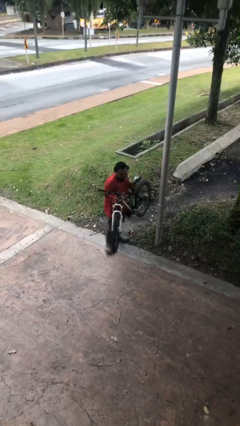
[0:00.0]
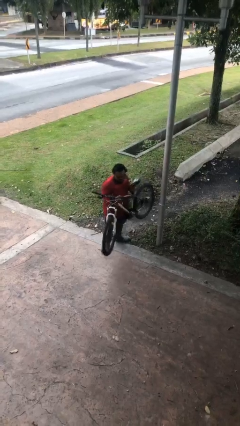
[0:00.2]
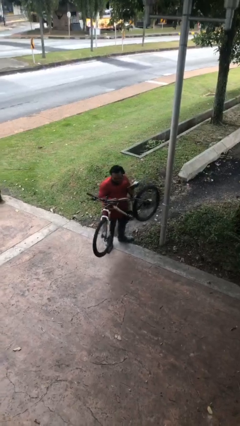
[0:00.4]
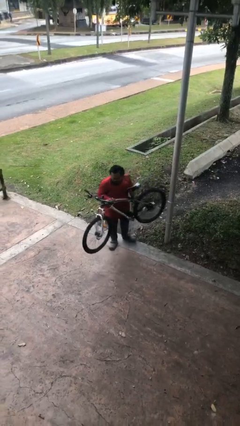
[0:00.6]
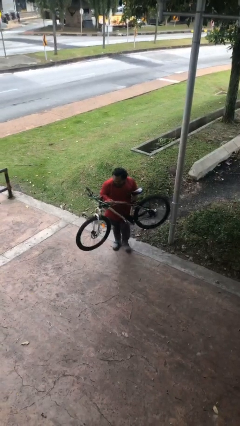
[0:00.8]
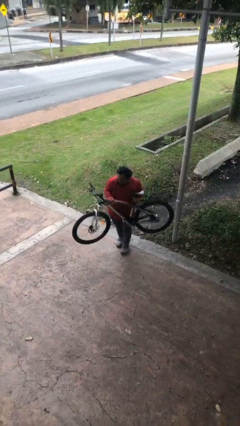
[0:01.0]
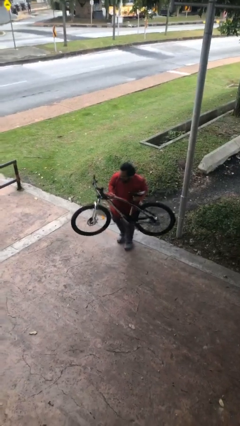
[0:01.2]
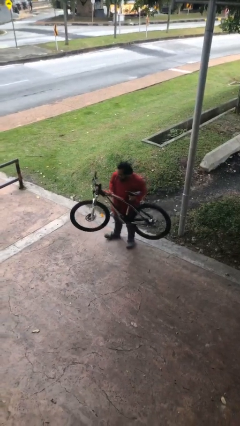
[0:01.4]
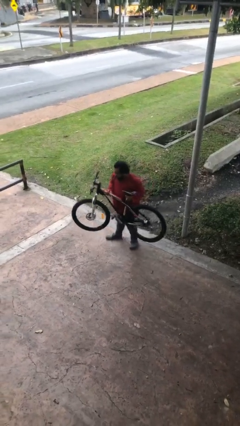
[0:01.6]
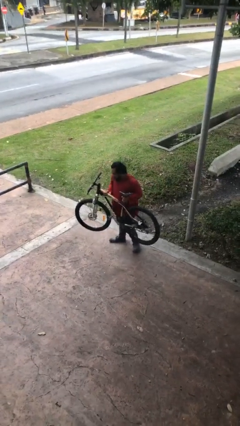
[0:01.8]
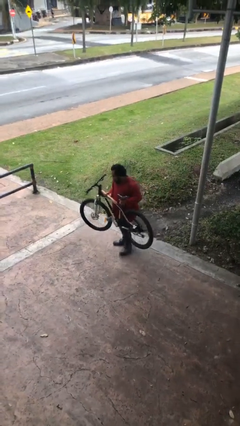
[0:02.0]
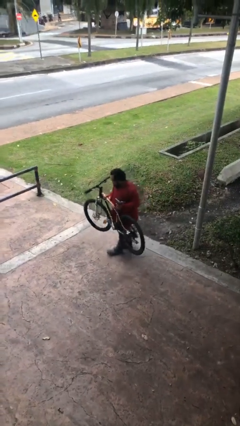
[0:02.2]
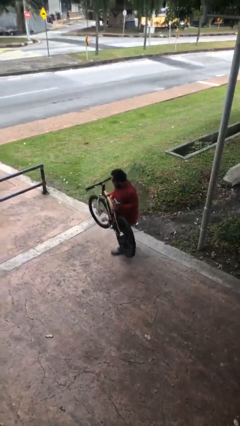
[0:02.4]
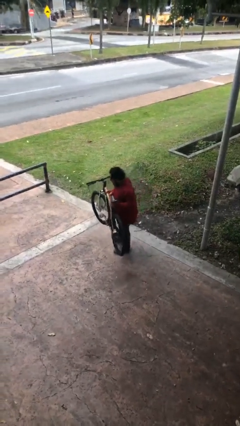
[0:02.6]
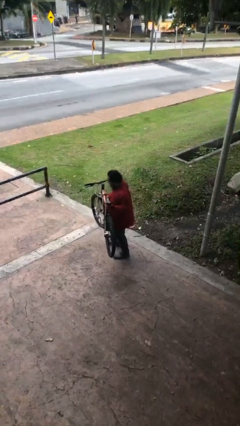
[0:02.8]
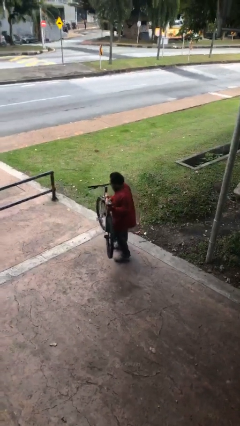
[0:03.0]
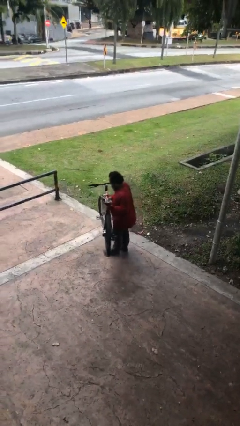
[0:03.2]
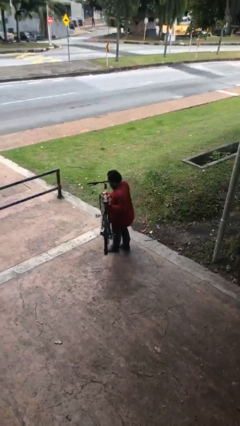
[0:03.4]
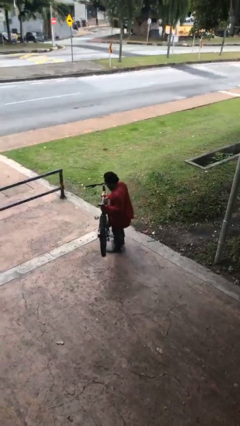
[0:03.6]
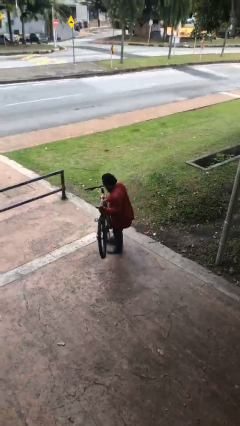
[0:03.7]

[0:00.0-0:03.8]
person carries heavy object

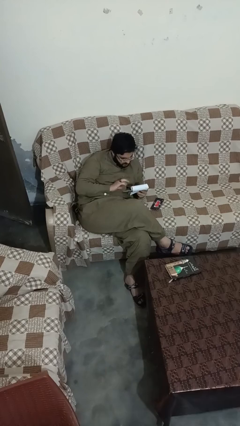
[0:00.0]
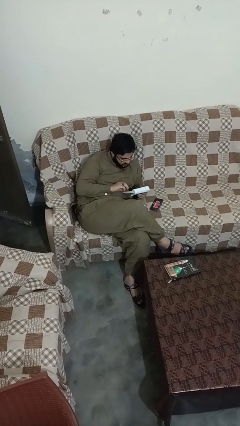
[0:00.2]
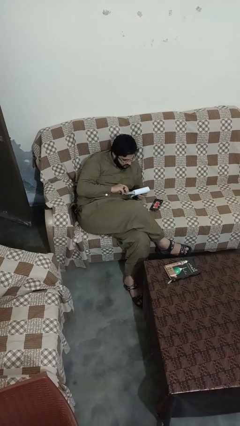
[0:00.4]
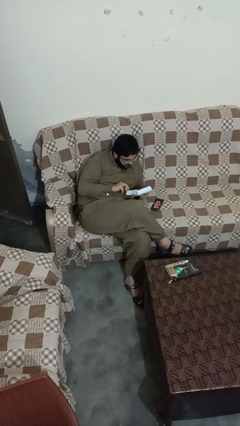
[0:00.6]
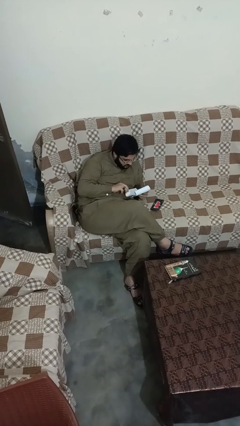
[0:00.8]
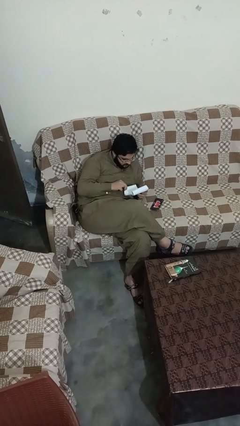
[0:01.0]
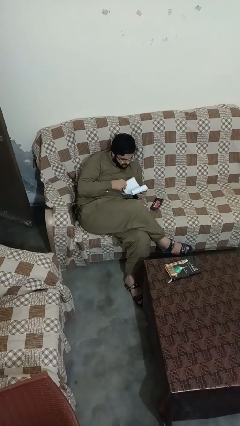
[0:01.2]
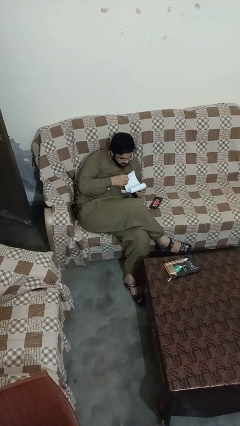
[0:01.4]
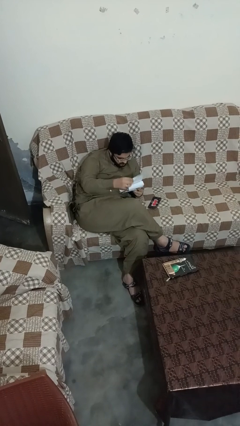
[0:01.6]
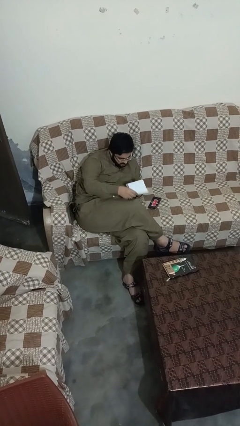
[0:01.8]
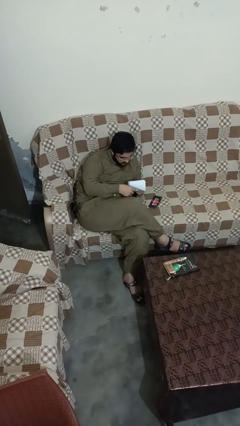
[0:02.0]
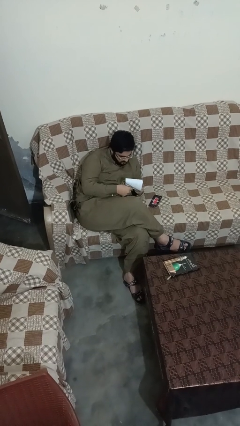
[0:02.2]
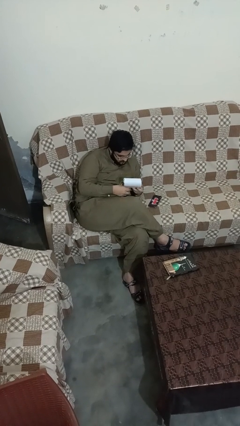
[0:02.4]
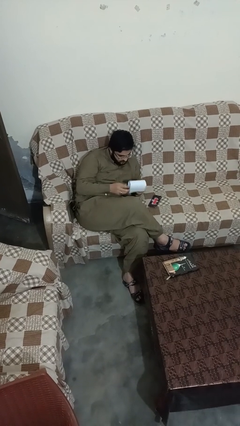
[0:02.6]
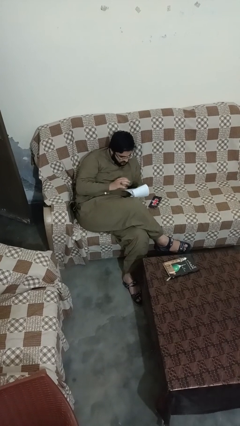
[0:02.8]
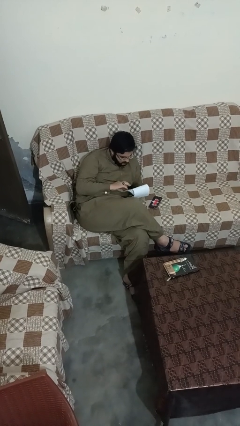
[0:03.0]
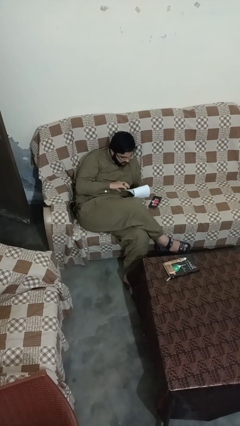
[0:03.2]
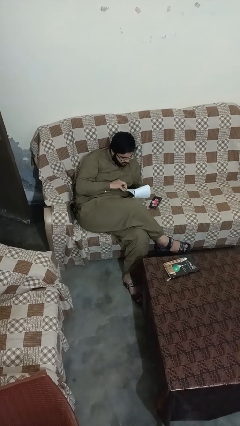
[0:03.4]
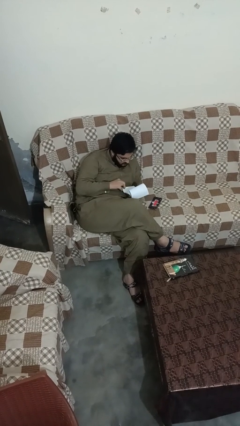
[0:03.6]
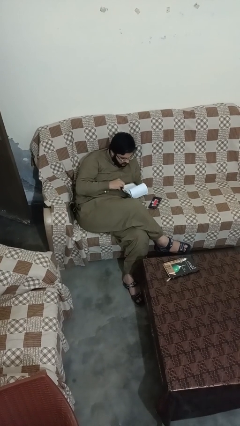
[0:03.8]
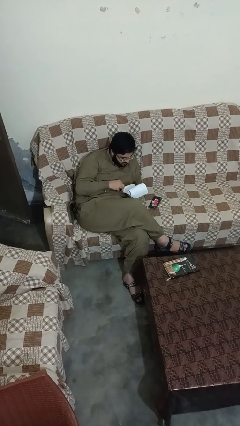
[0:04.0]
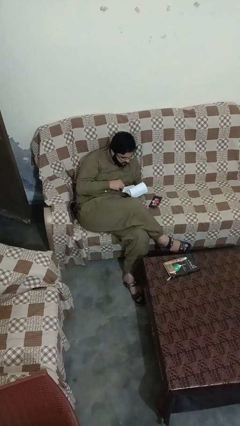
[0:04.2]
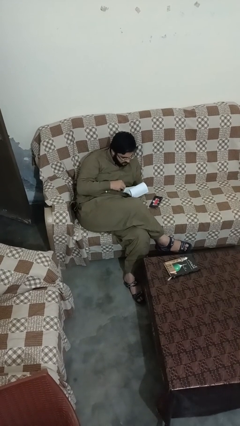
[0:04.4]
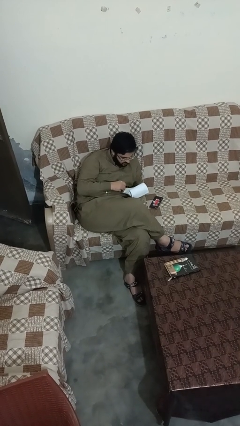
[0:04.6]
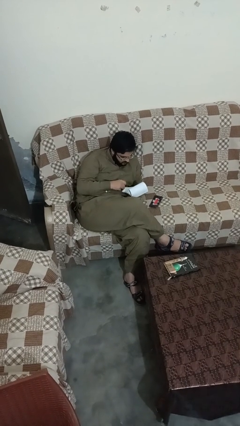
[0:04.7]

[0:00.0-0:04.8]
person reads magazine

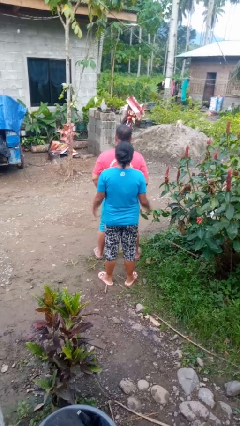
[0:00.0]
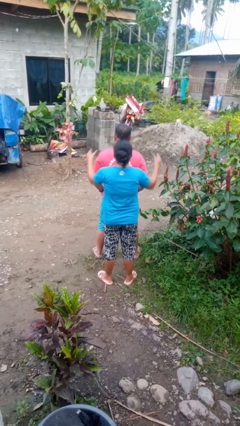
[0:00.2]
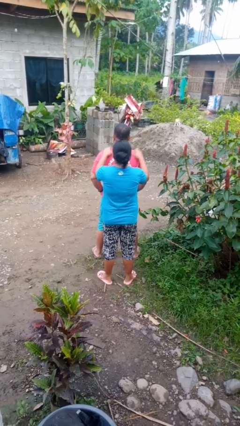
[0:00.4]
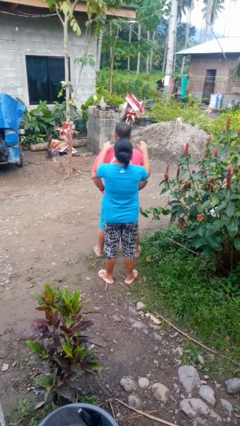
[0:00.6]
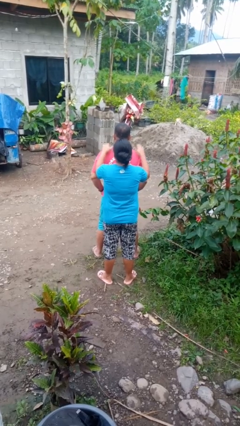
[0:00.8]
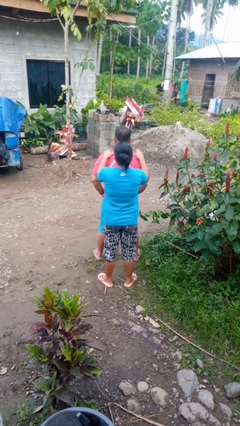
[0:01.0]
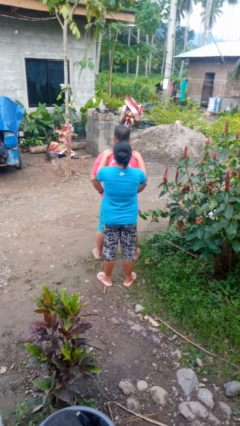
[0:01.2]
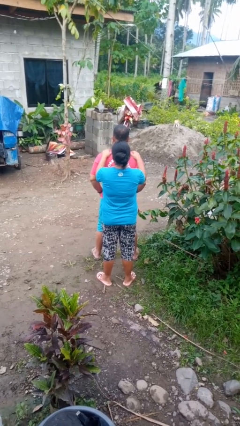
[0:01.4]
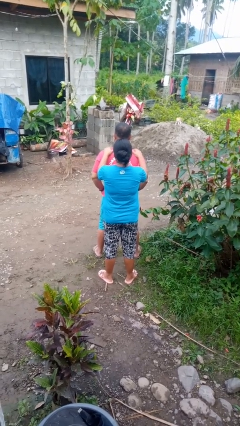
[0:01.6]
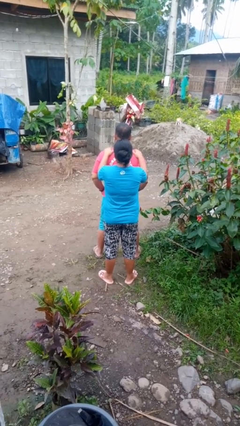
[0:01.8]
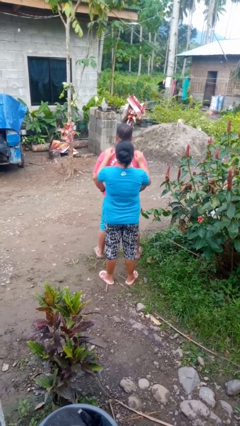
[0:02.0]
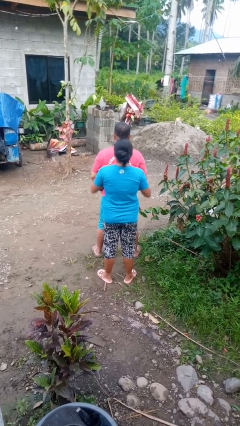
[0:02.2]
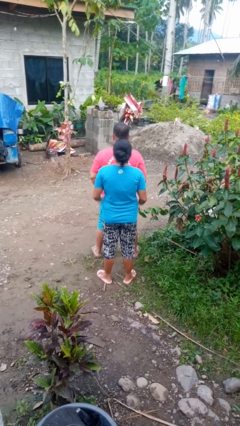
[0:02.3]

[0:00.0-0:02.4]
person pounds shoulders of person

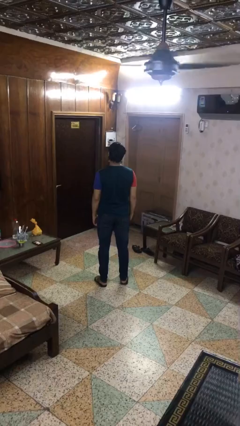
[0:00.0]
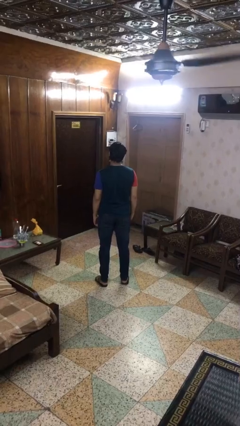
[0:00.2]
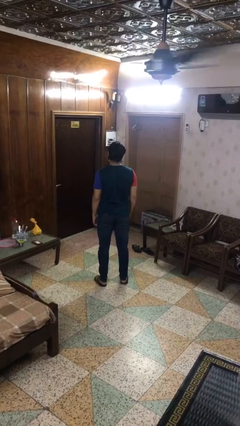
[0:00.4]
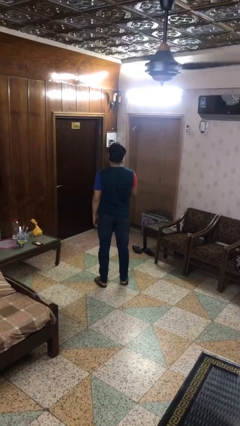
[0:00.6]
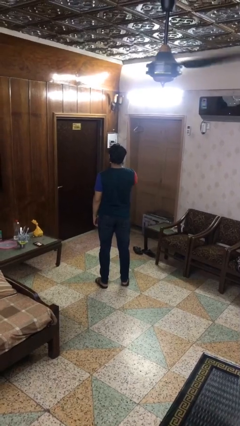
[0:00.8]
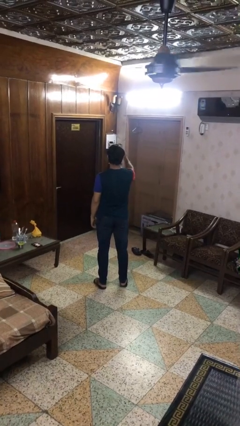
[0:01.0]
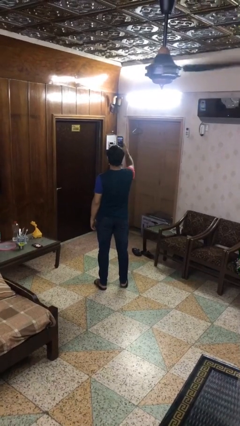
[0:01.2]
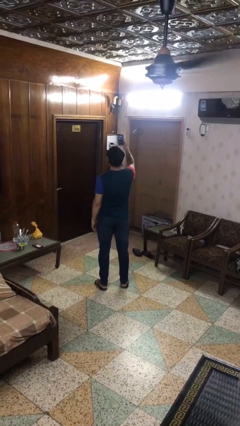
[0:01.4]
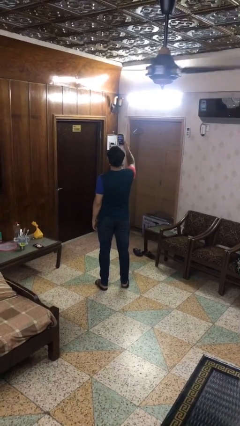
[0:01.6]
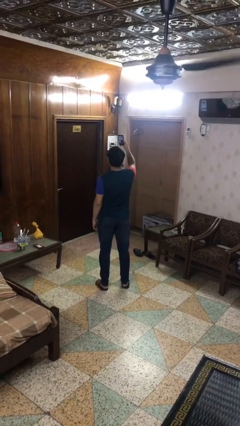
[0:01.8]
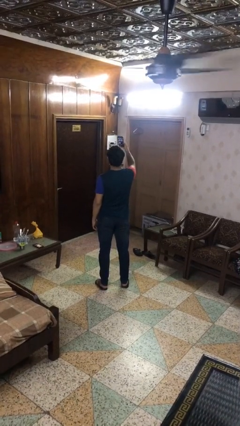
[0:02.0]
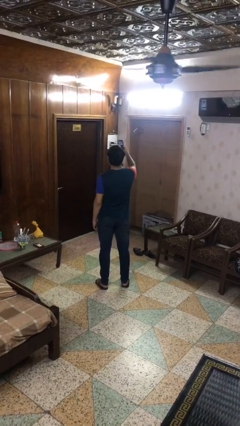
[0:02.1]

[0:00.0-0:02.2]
person takes selfie

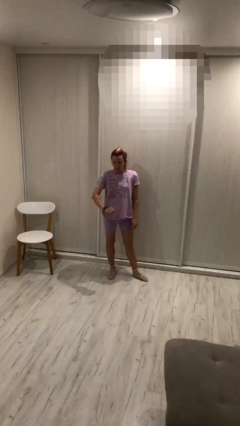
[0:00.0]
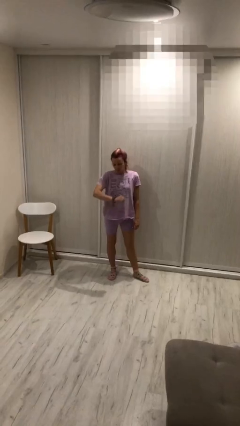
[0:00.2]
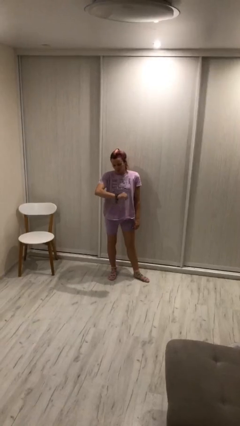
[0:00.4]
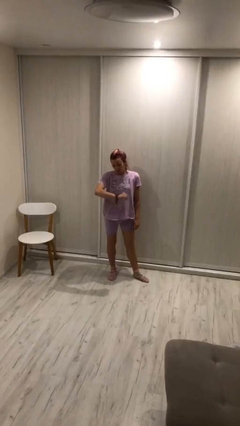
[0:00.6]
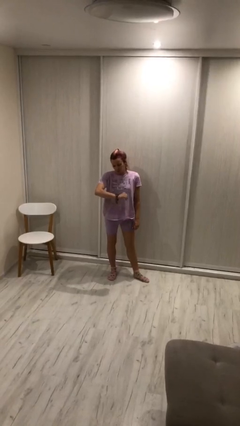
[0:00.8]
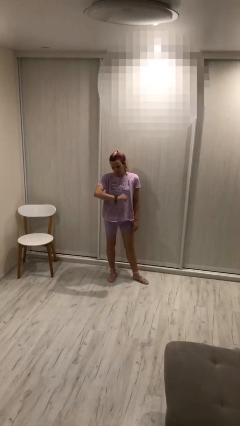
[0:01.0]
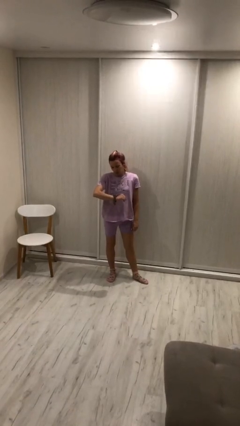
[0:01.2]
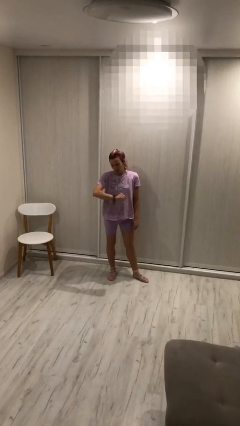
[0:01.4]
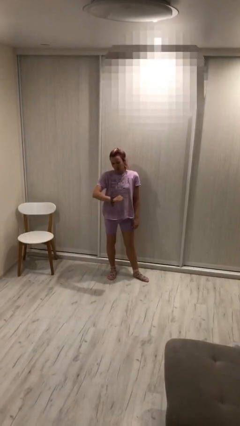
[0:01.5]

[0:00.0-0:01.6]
person looks at wristwatch

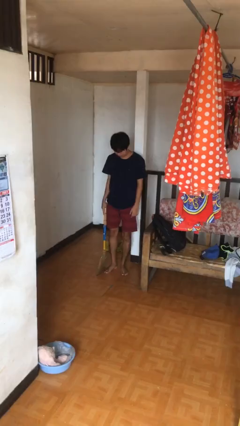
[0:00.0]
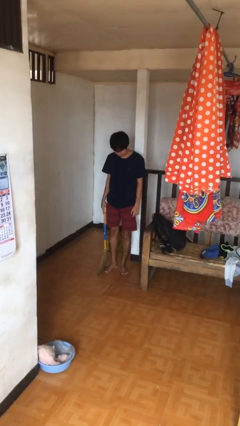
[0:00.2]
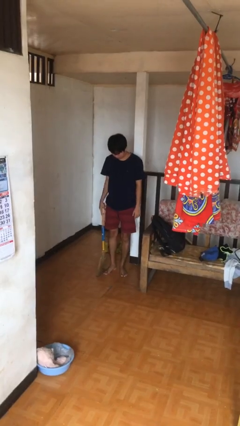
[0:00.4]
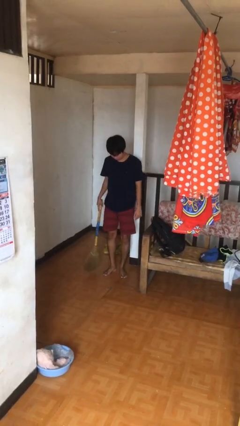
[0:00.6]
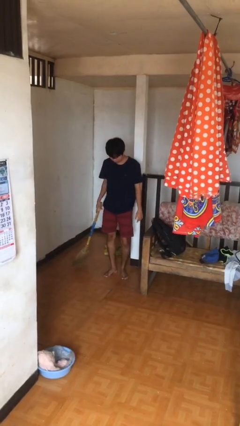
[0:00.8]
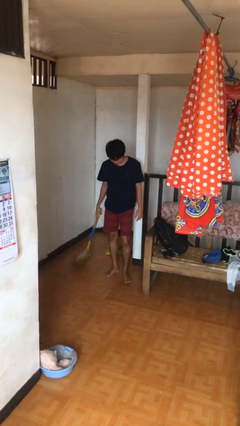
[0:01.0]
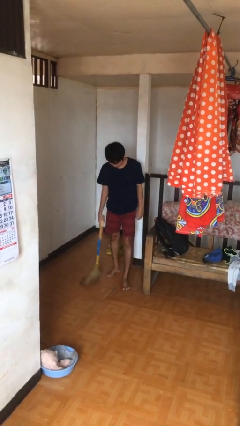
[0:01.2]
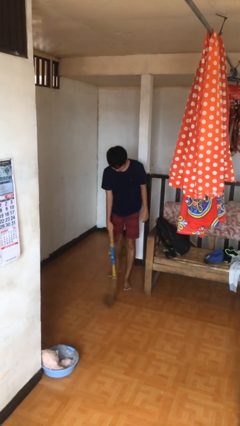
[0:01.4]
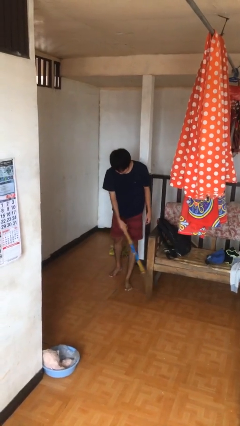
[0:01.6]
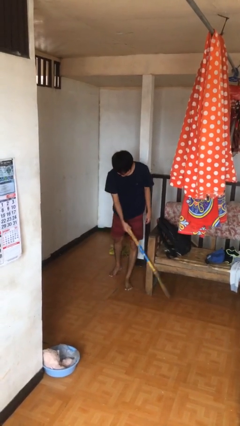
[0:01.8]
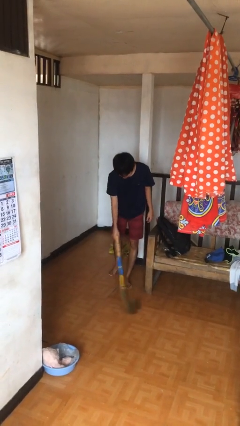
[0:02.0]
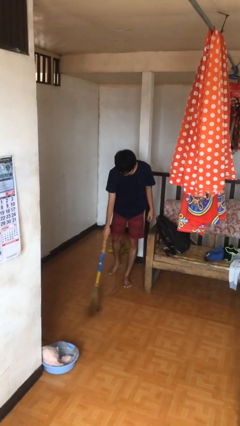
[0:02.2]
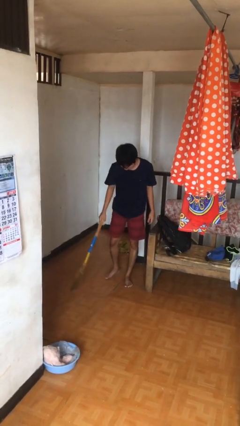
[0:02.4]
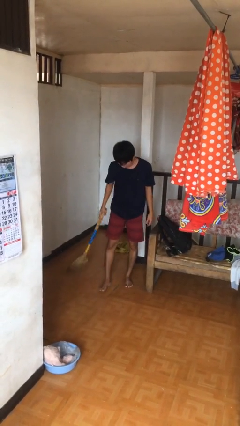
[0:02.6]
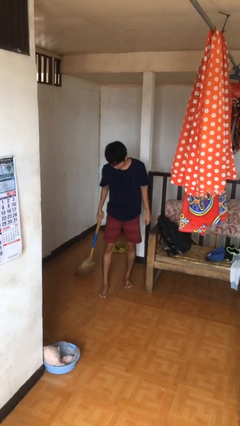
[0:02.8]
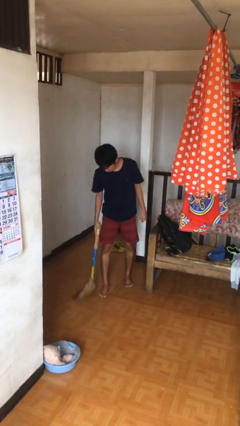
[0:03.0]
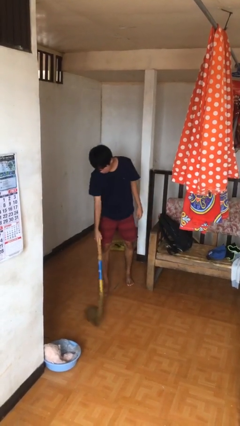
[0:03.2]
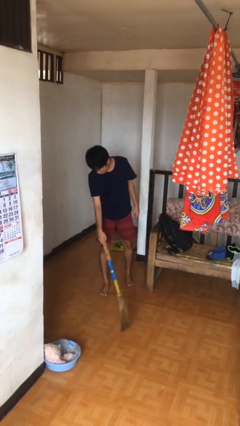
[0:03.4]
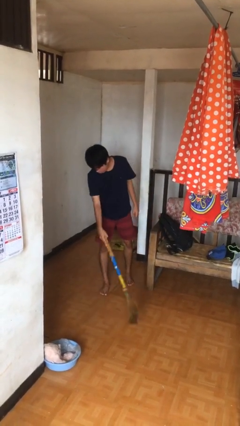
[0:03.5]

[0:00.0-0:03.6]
person sweeps floor
